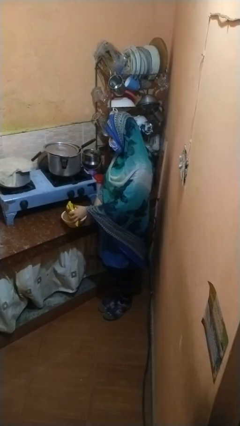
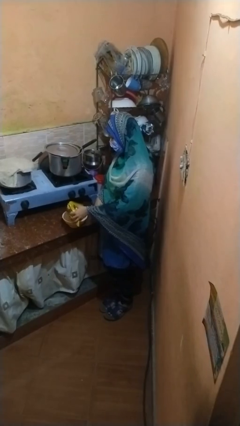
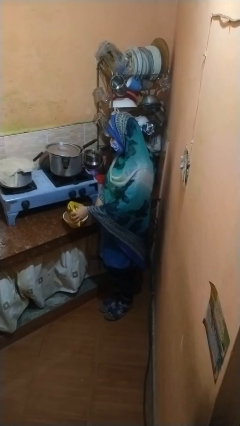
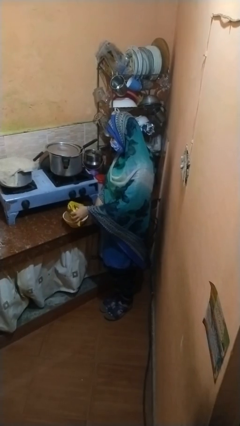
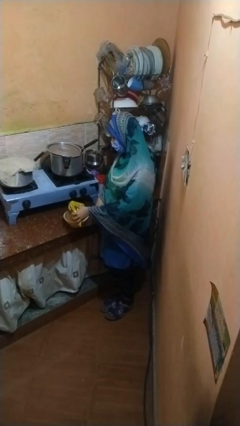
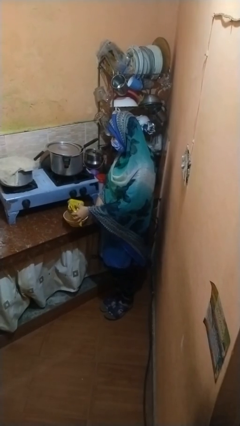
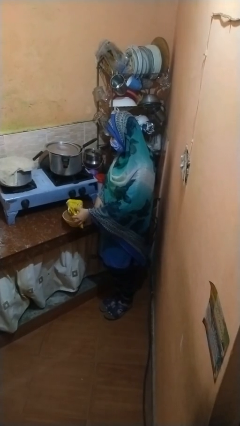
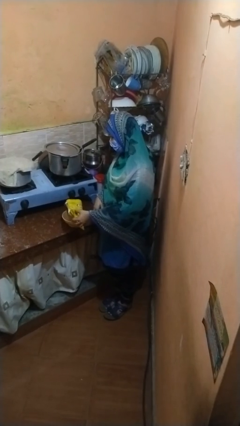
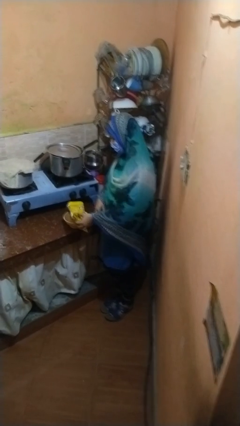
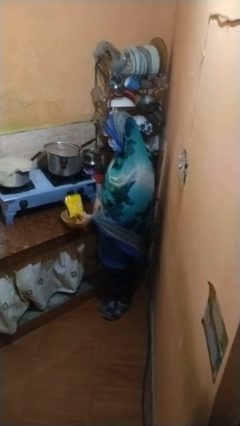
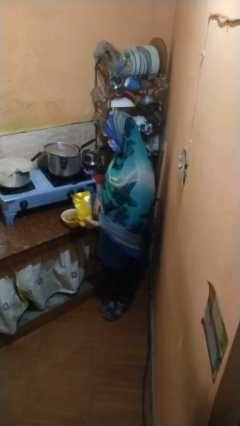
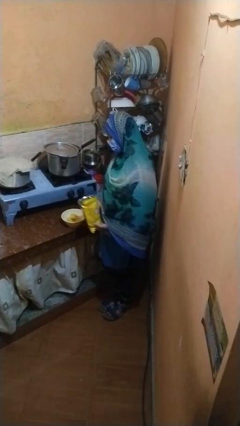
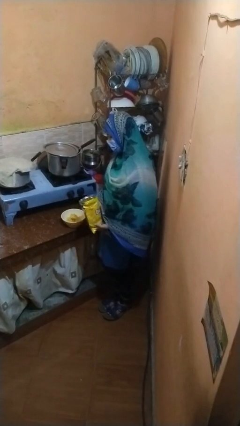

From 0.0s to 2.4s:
person pours into bowl

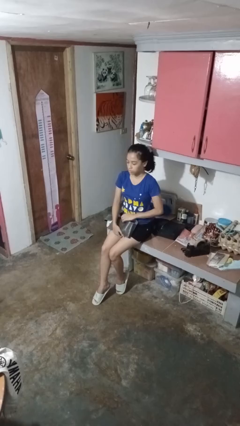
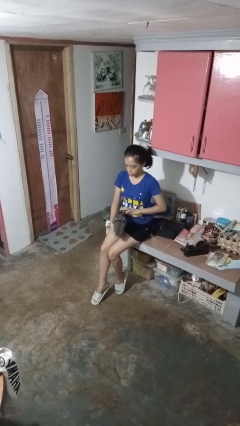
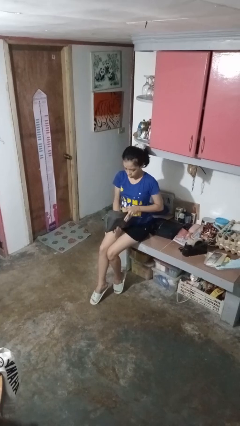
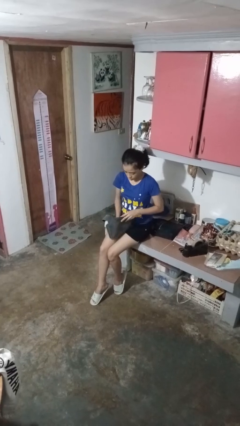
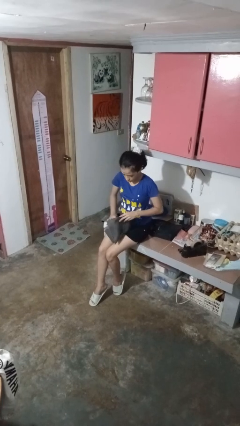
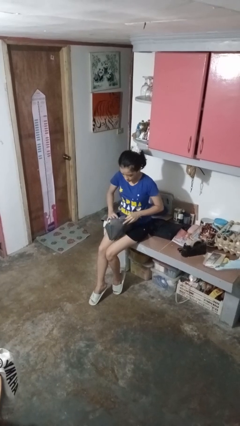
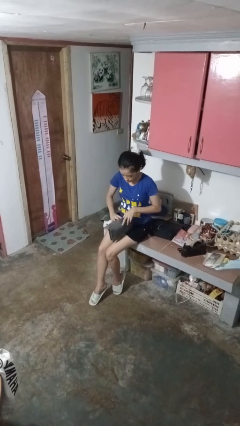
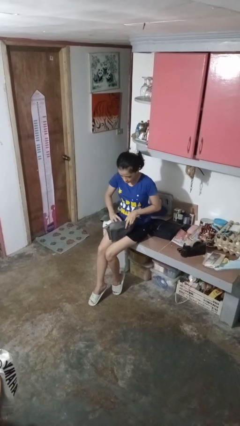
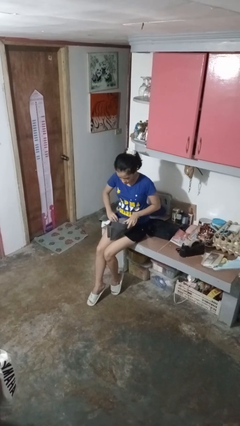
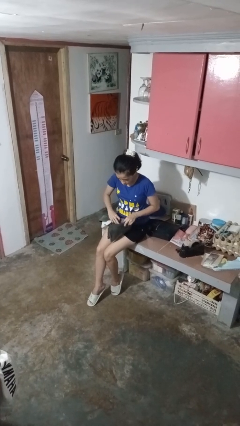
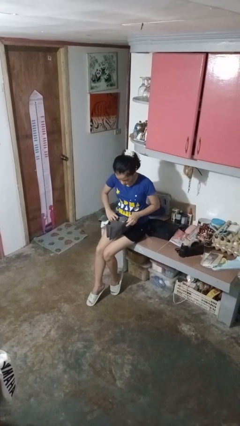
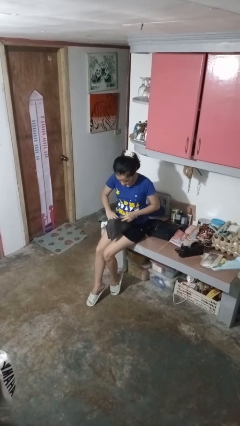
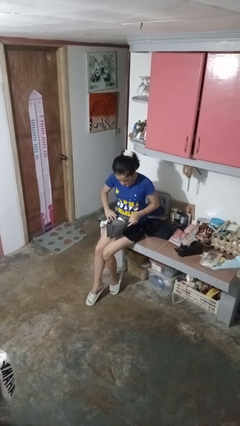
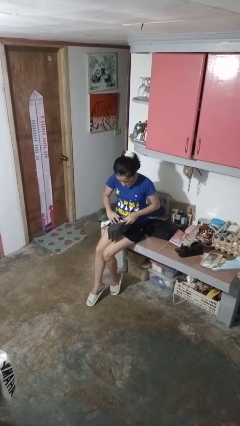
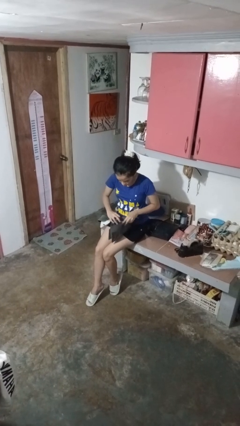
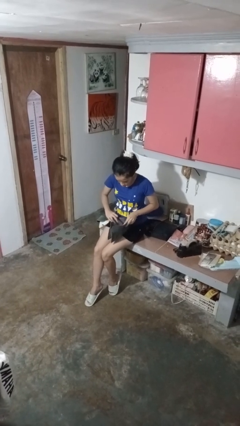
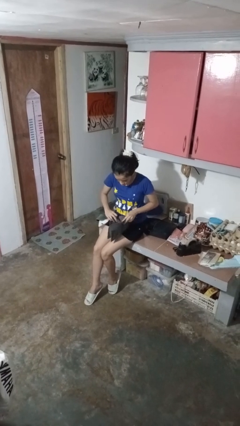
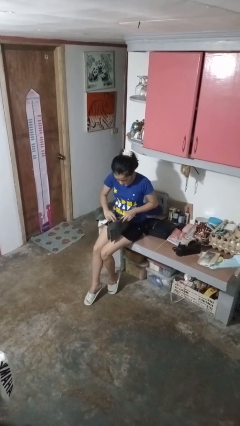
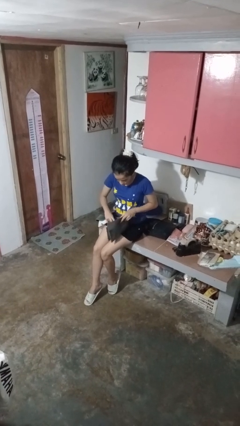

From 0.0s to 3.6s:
person searches in purse

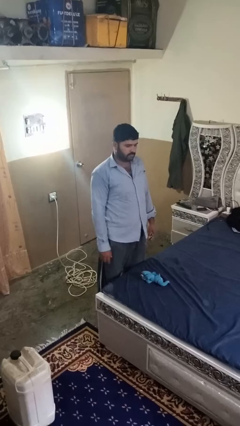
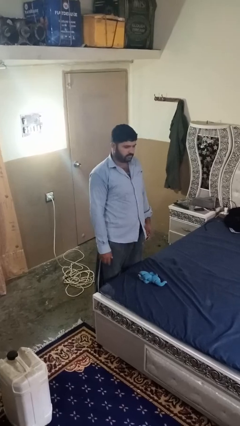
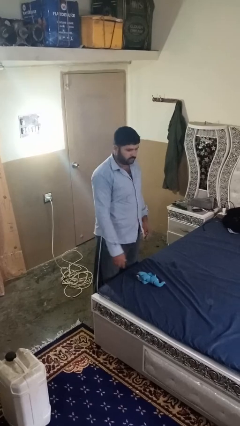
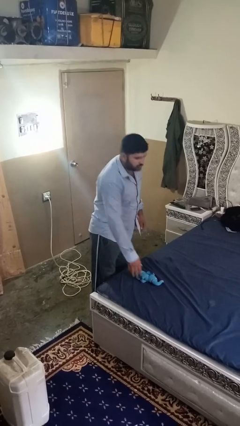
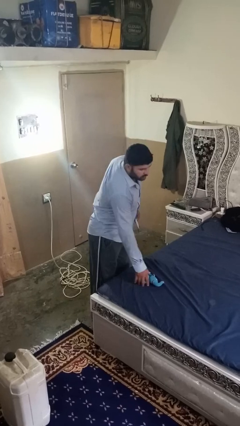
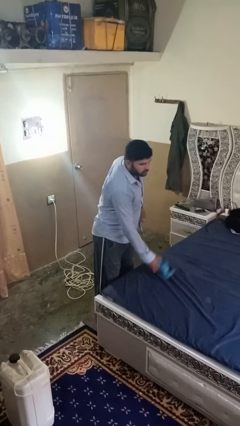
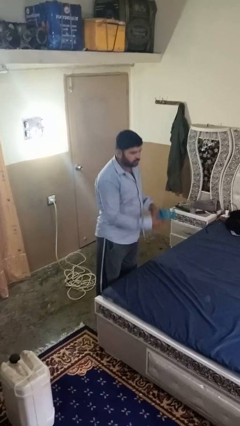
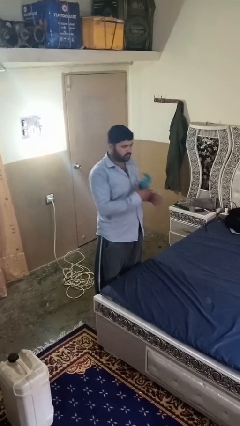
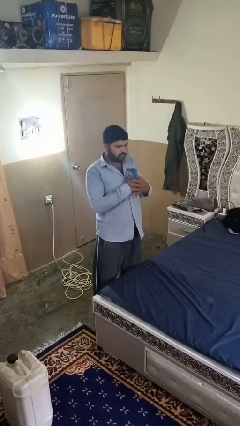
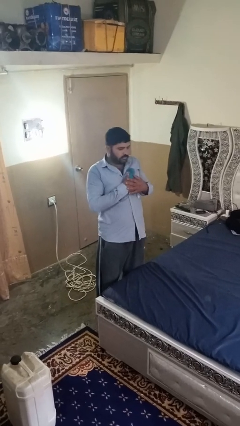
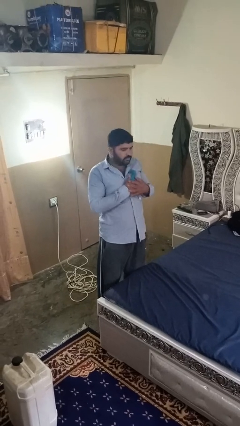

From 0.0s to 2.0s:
person hugs stuffed animal

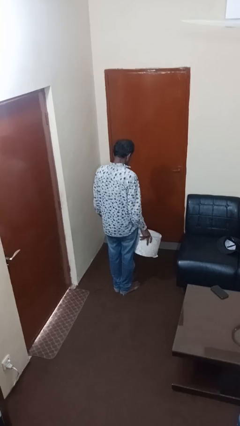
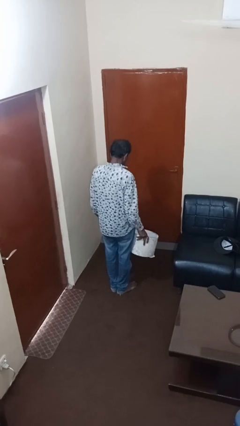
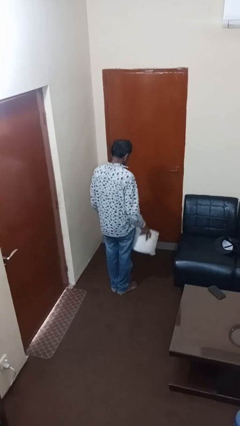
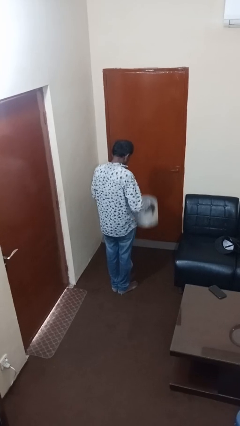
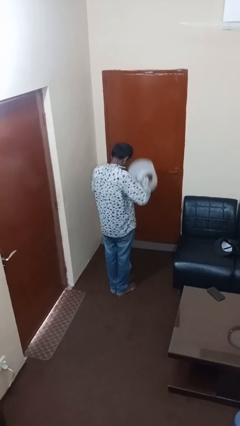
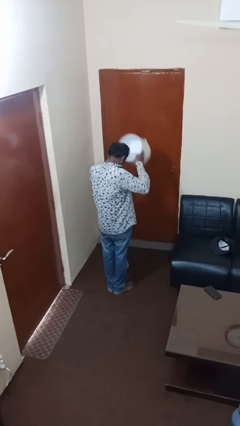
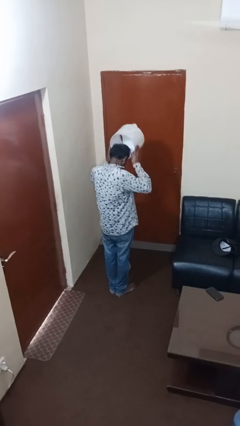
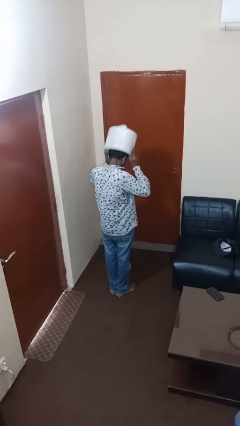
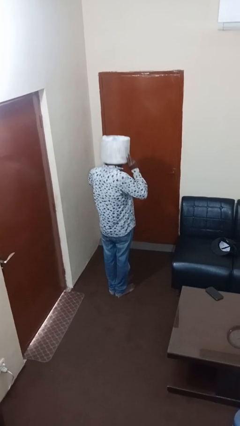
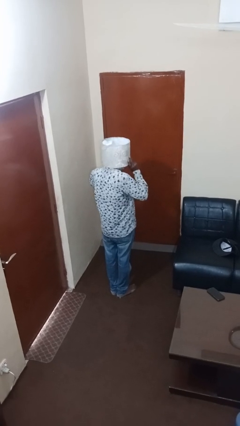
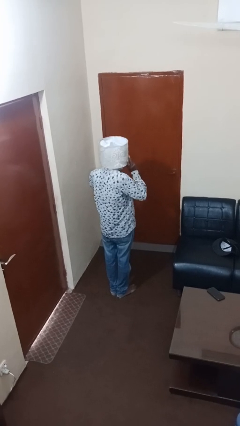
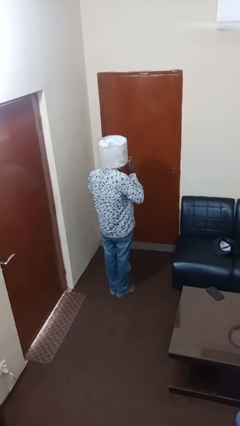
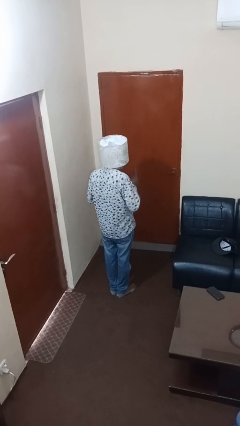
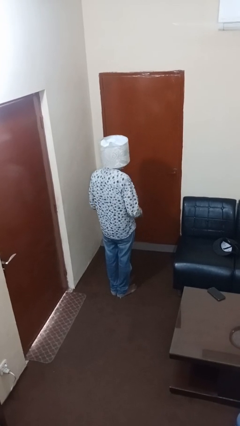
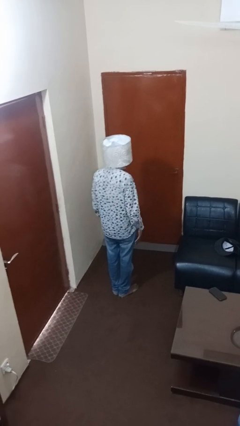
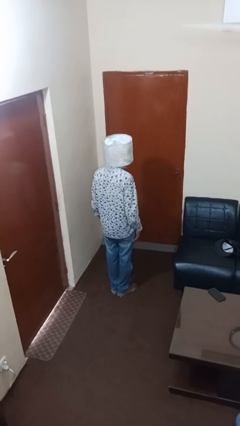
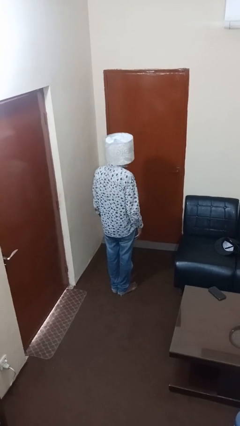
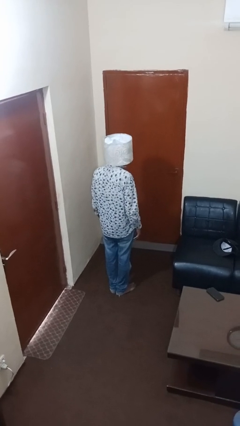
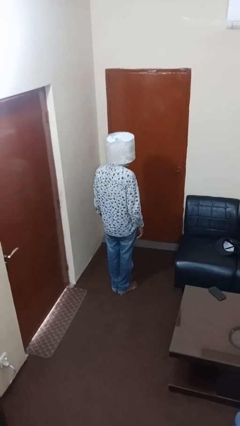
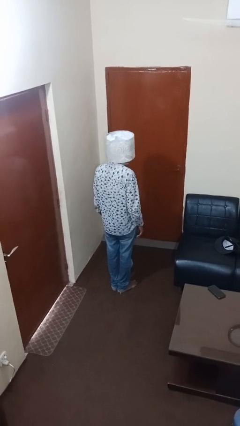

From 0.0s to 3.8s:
person puts on hat

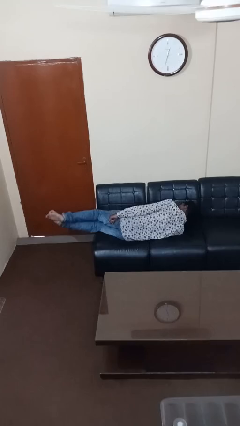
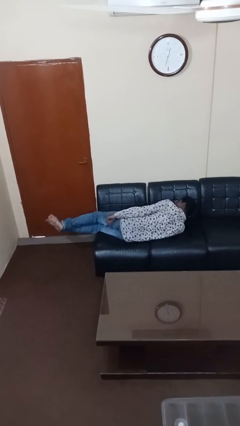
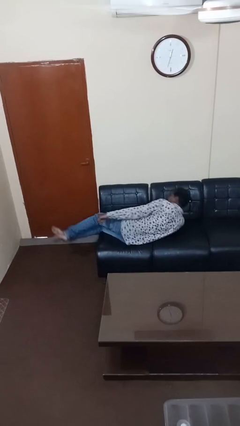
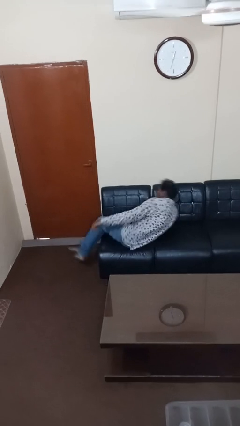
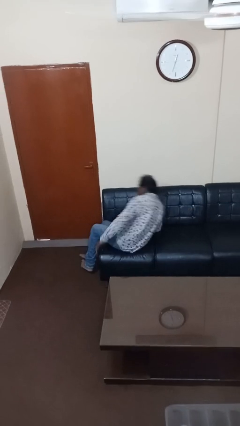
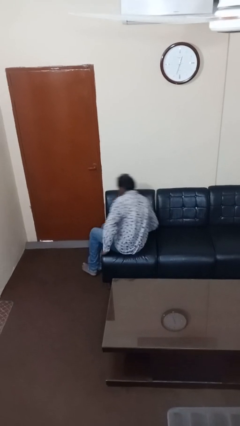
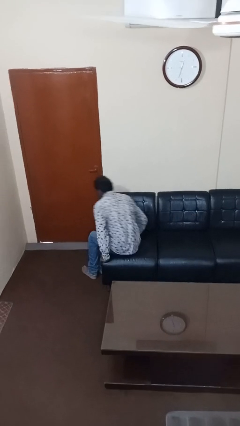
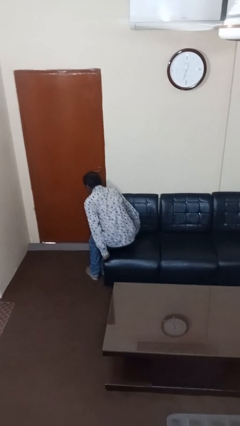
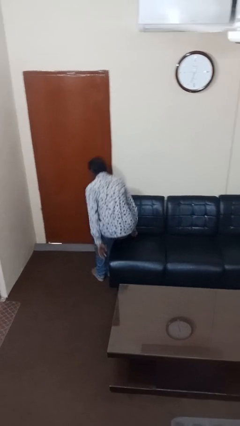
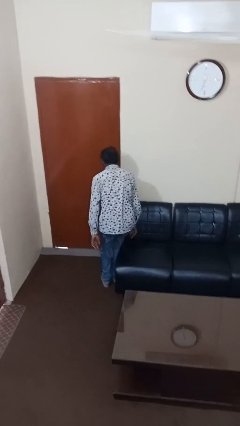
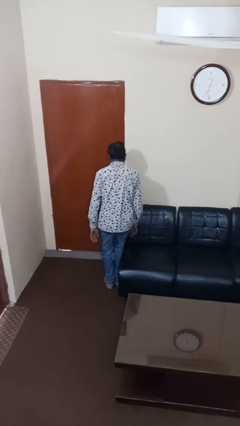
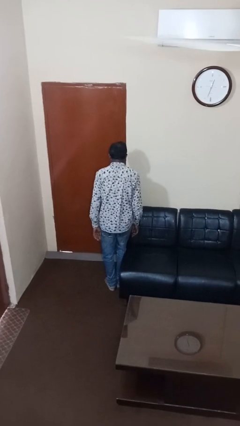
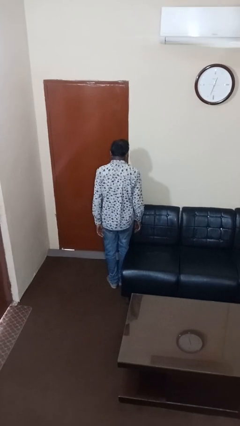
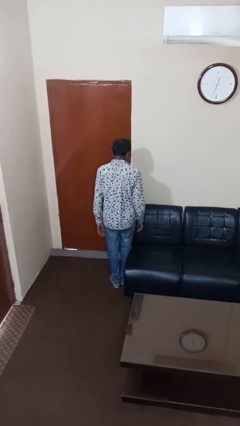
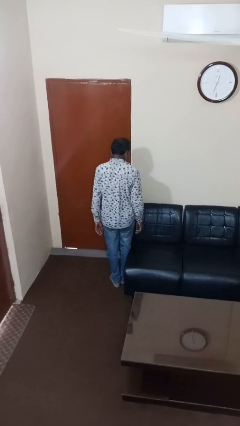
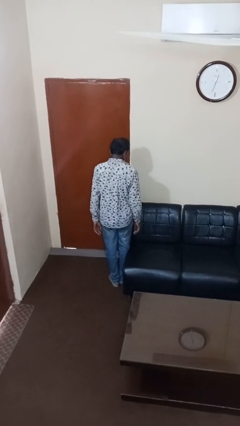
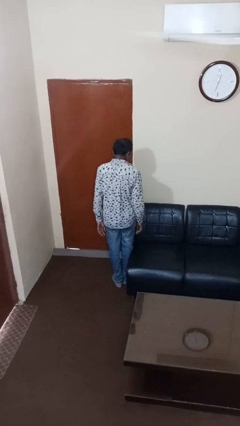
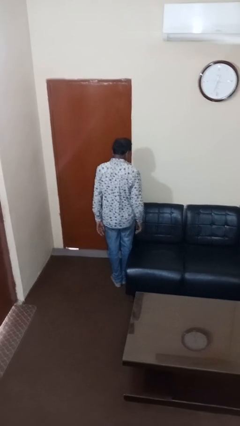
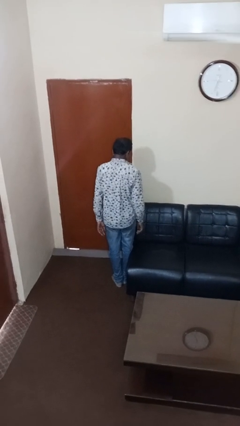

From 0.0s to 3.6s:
person stands up

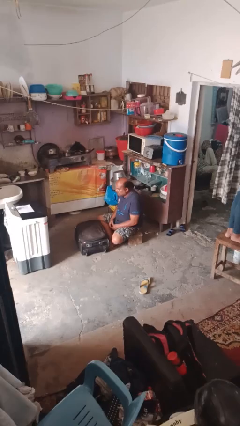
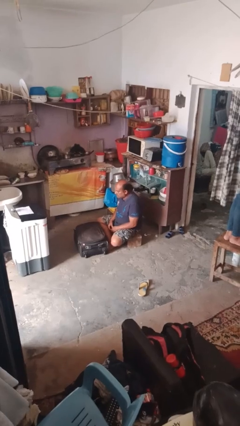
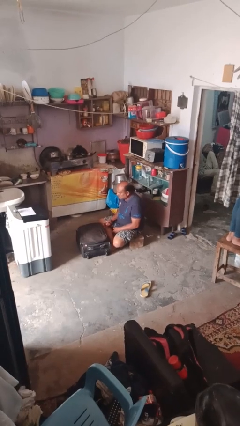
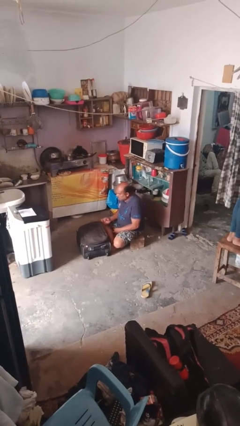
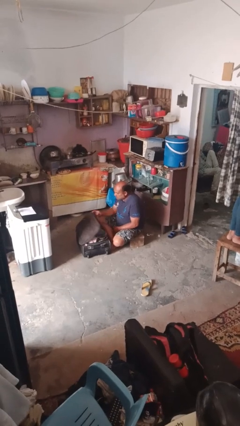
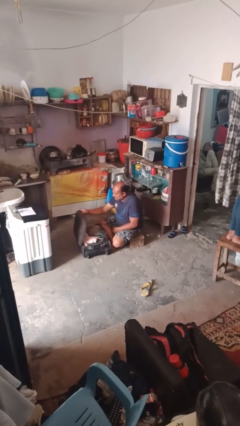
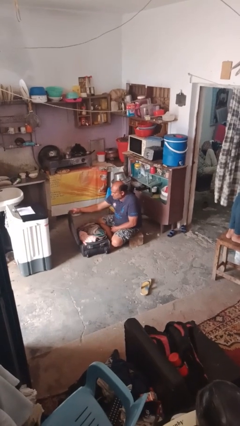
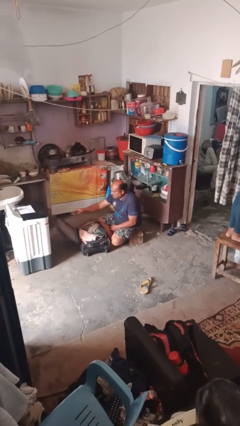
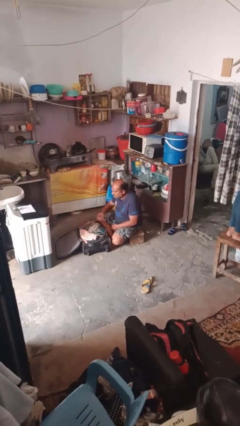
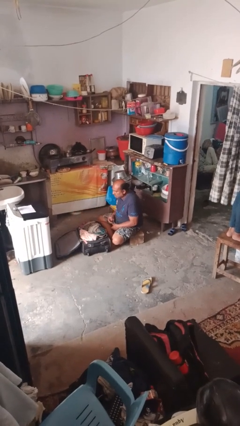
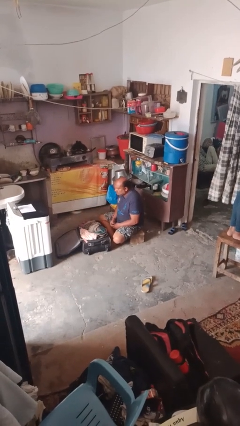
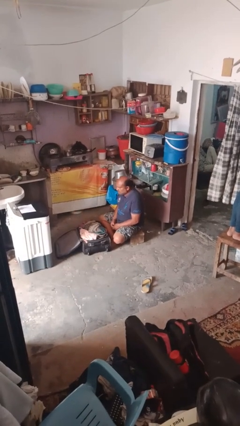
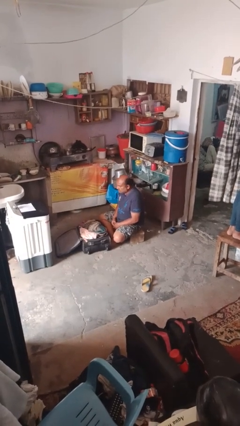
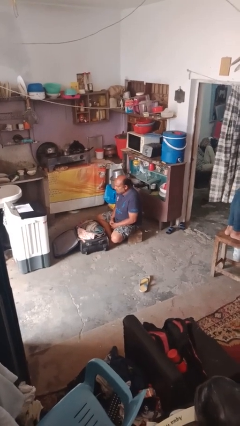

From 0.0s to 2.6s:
person opens suitcase
